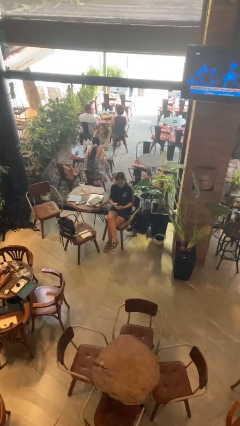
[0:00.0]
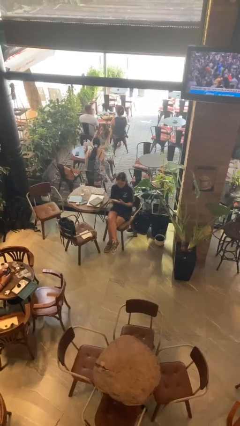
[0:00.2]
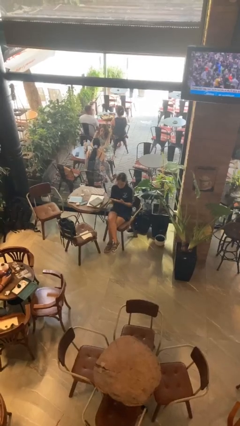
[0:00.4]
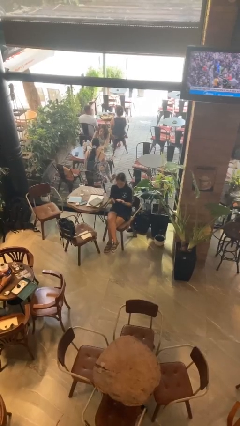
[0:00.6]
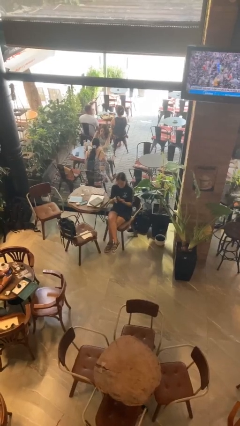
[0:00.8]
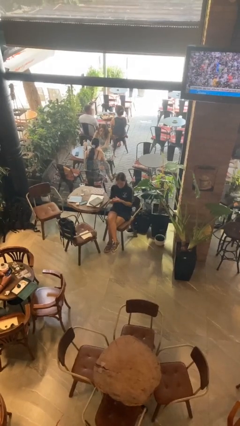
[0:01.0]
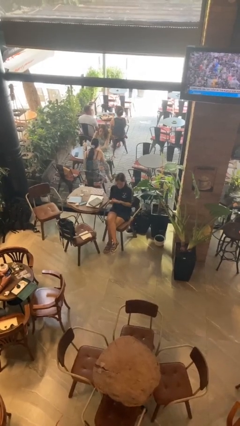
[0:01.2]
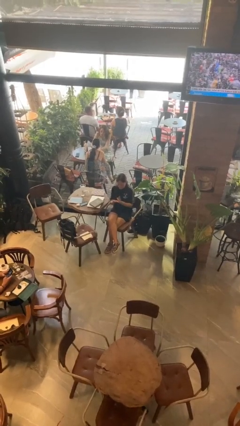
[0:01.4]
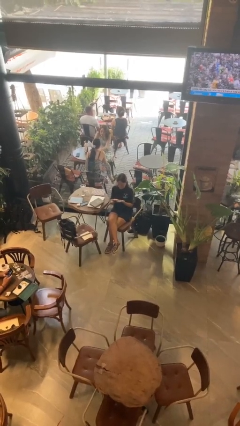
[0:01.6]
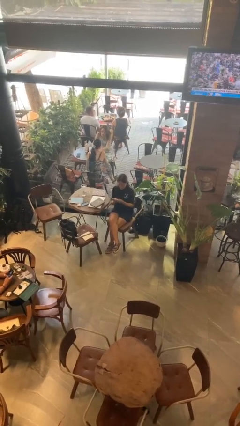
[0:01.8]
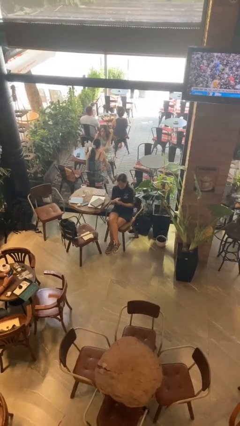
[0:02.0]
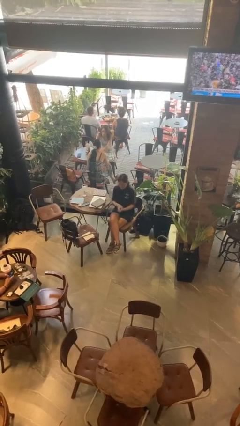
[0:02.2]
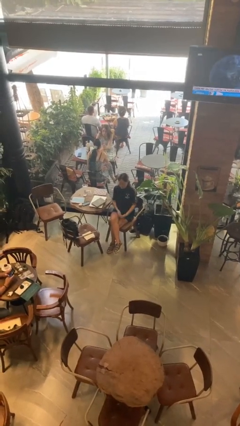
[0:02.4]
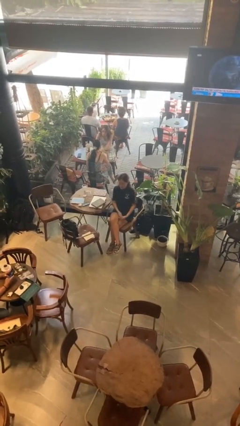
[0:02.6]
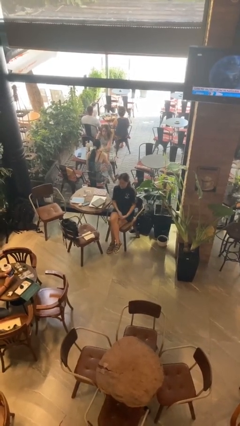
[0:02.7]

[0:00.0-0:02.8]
person looks at hands in lap

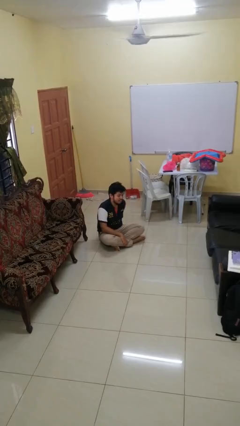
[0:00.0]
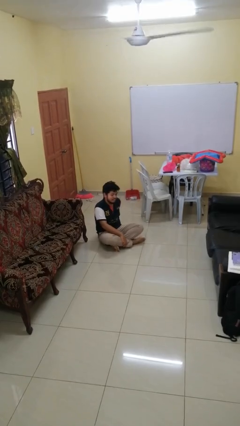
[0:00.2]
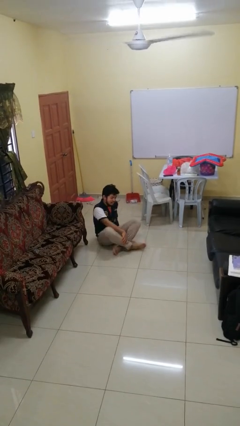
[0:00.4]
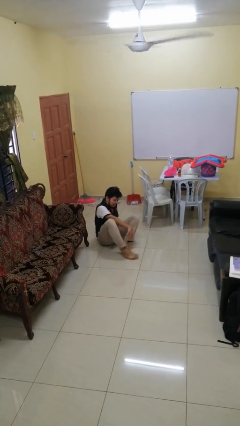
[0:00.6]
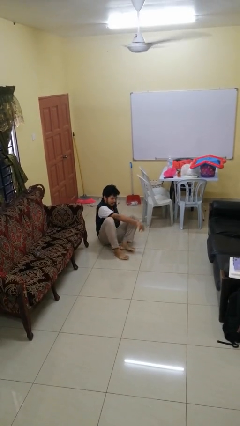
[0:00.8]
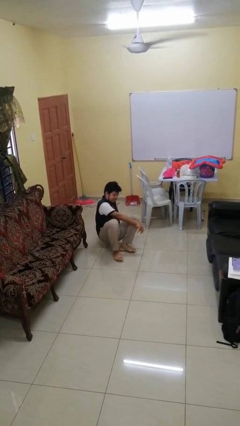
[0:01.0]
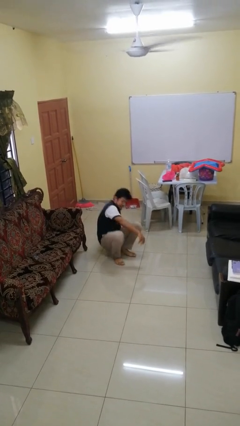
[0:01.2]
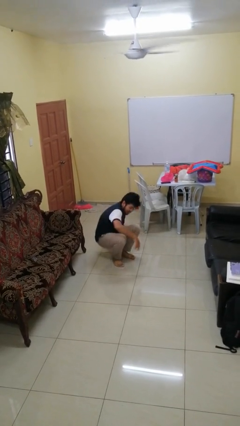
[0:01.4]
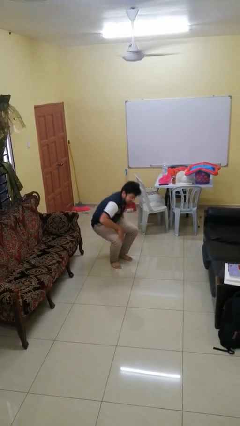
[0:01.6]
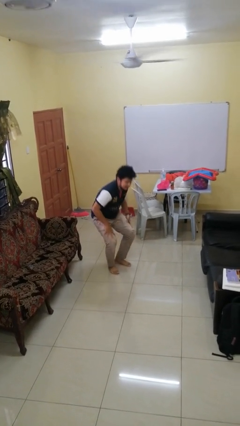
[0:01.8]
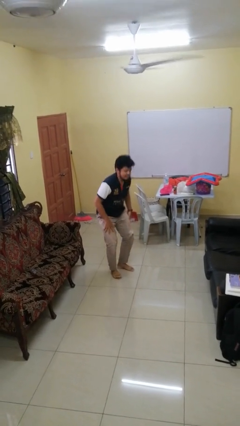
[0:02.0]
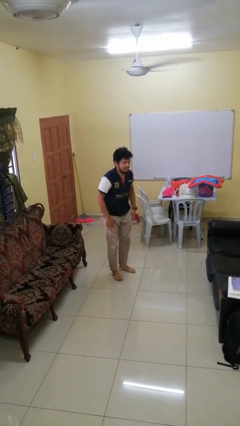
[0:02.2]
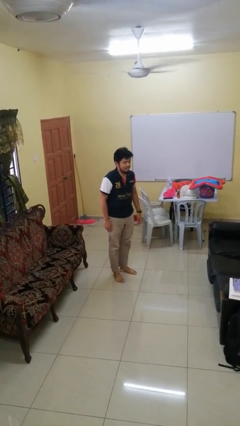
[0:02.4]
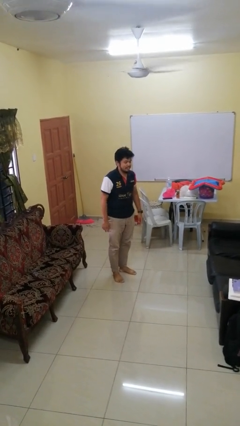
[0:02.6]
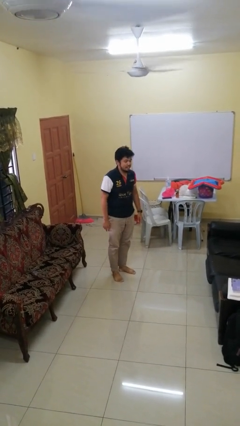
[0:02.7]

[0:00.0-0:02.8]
person stands up from floor

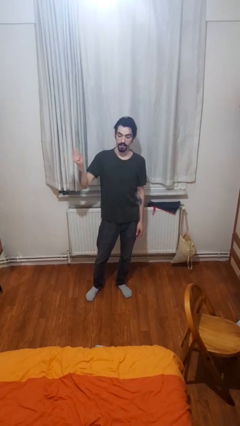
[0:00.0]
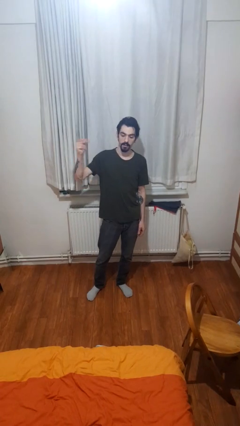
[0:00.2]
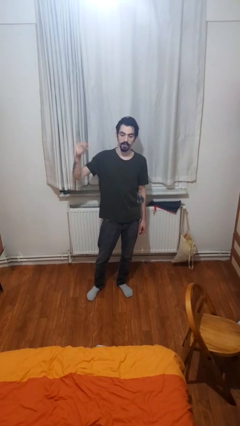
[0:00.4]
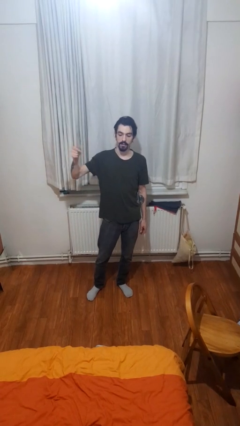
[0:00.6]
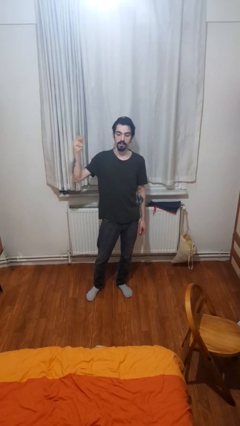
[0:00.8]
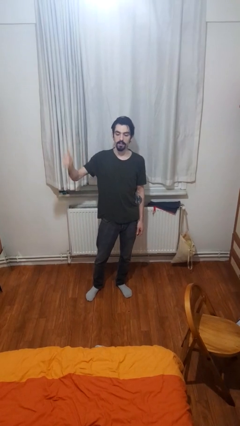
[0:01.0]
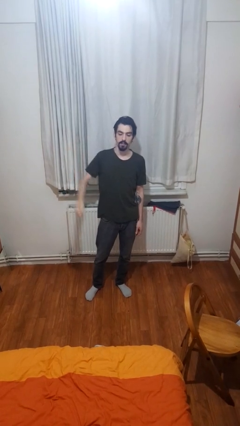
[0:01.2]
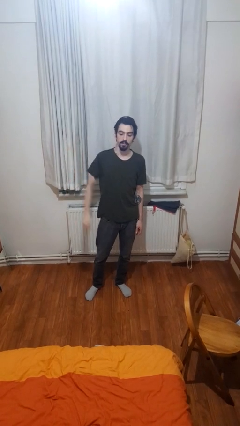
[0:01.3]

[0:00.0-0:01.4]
person snaps fingers

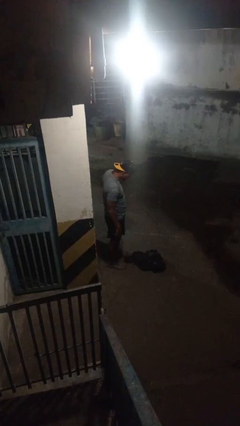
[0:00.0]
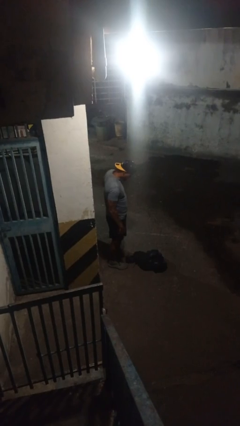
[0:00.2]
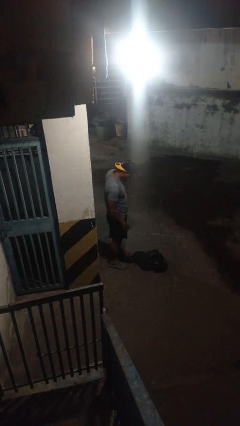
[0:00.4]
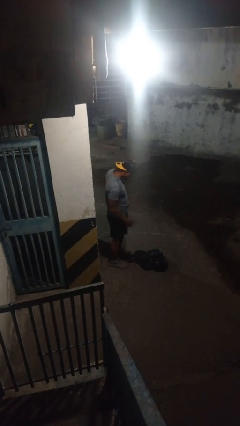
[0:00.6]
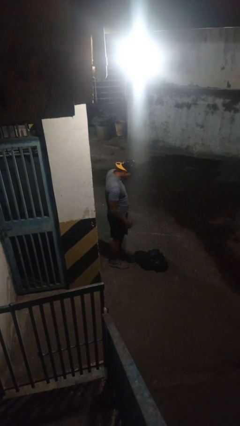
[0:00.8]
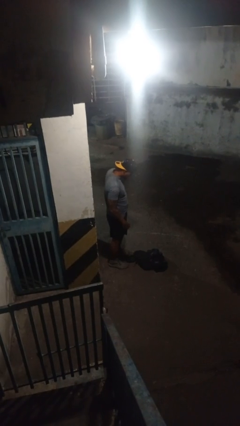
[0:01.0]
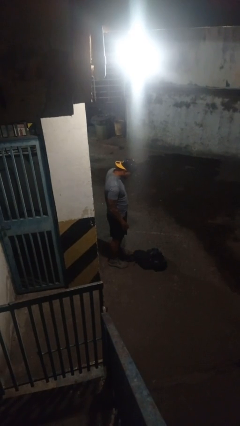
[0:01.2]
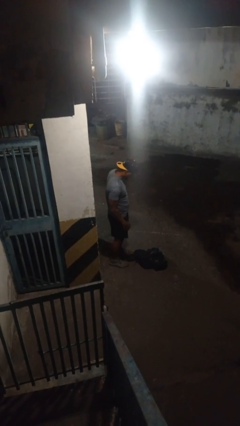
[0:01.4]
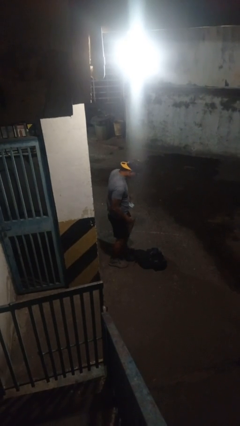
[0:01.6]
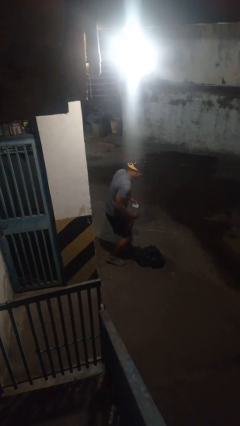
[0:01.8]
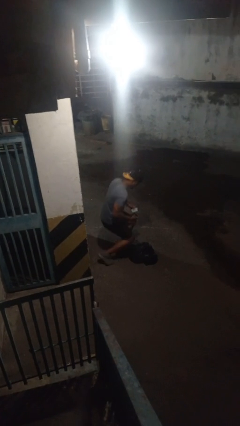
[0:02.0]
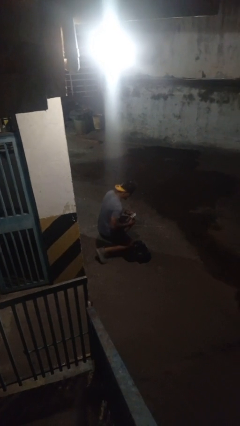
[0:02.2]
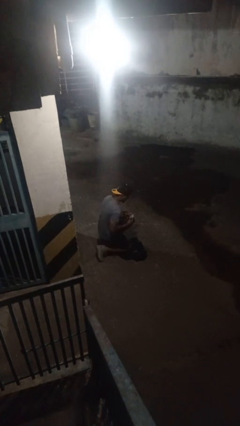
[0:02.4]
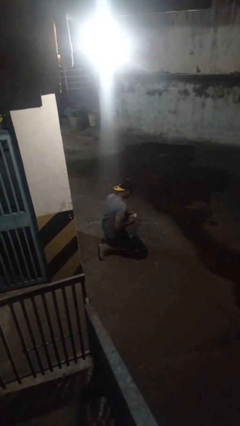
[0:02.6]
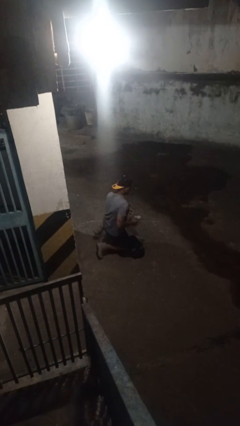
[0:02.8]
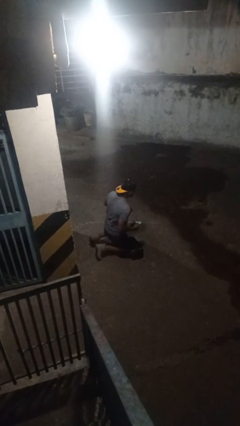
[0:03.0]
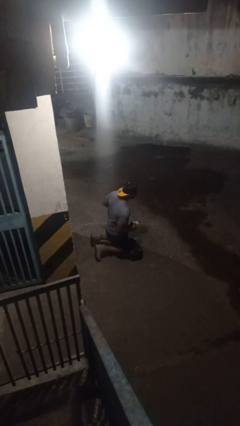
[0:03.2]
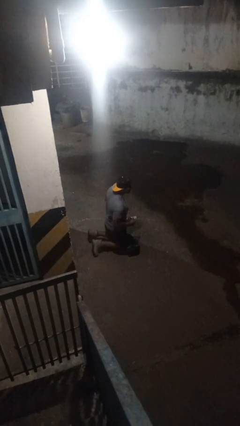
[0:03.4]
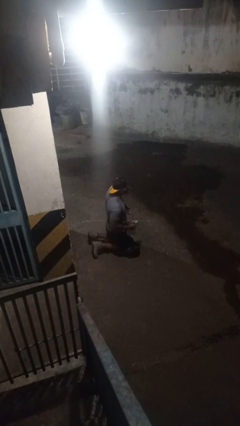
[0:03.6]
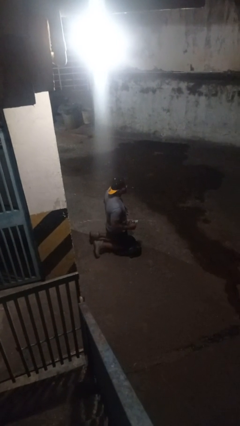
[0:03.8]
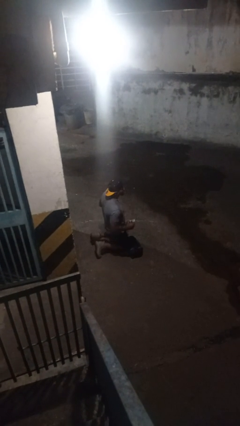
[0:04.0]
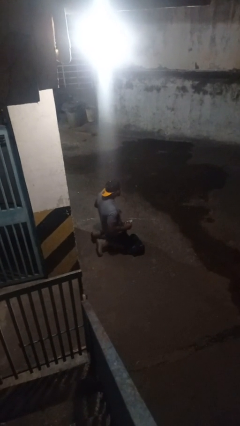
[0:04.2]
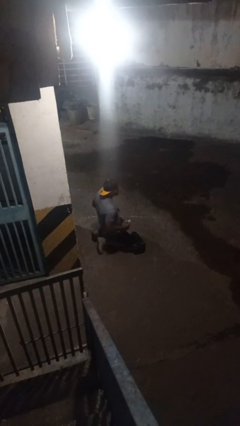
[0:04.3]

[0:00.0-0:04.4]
person kneels

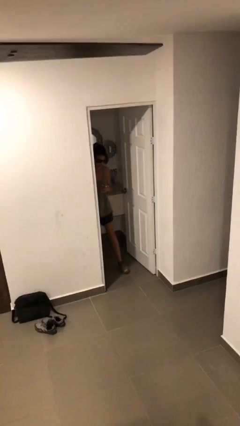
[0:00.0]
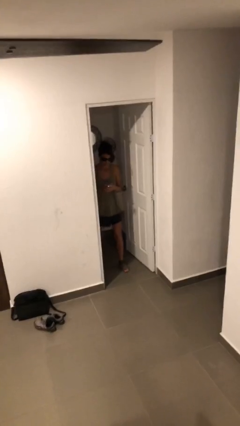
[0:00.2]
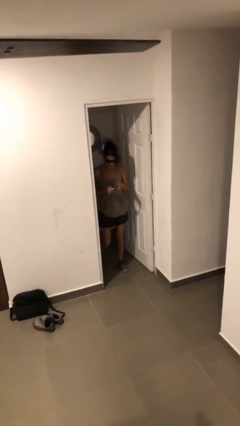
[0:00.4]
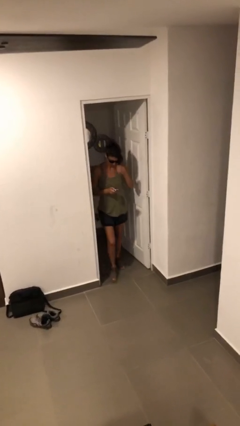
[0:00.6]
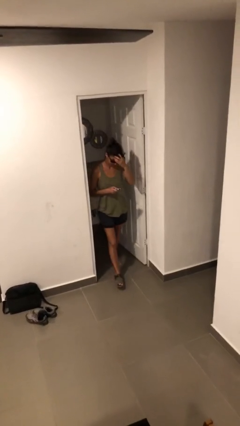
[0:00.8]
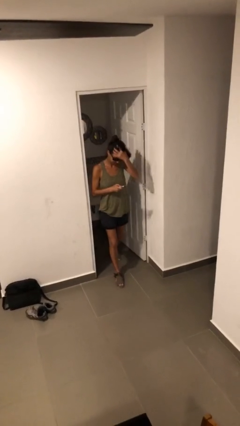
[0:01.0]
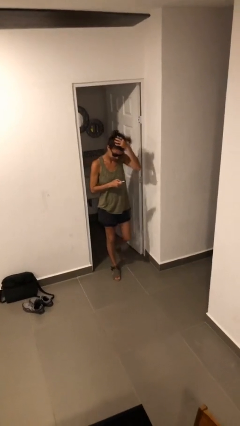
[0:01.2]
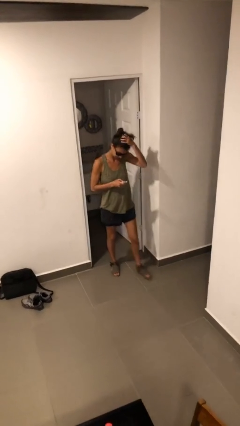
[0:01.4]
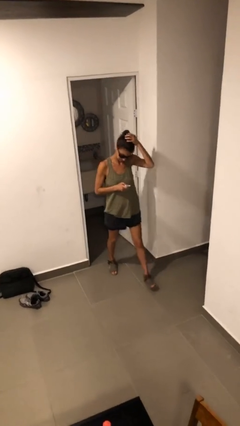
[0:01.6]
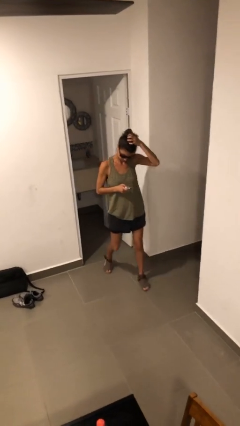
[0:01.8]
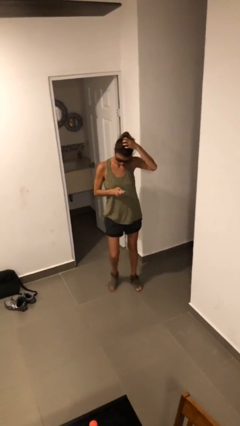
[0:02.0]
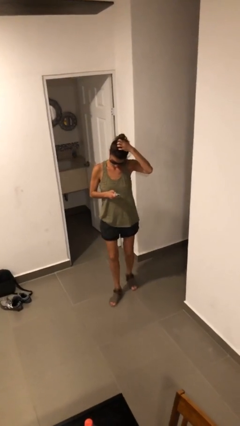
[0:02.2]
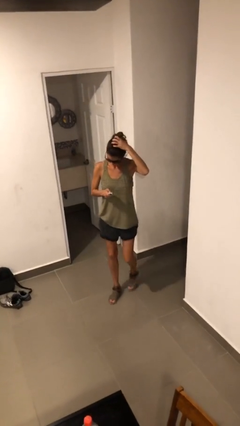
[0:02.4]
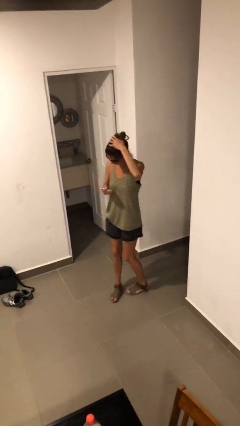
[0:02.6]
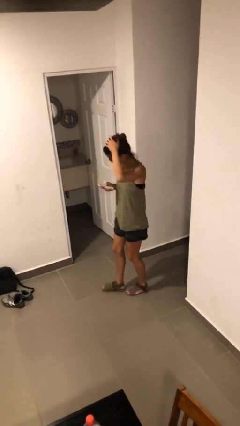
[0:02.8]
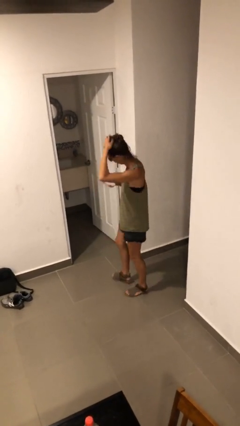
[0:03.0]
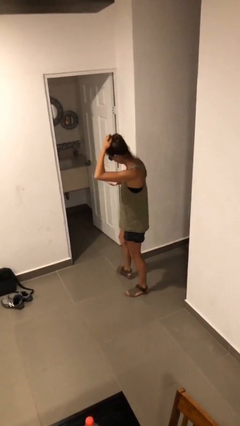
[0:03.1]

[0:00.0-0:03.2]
person enters scene through structure

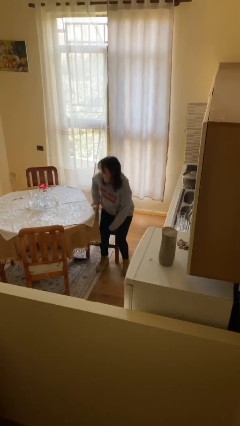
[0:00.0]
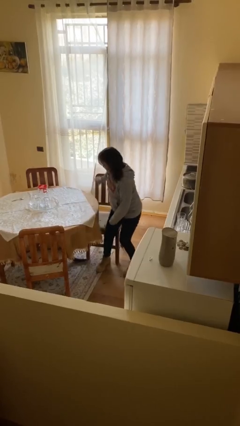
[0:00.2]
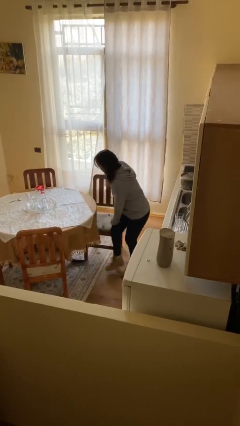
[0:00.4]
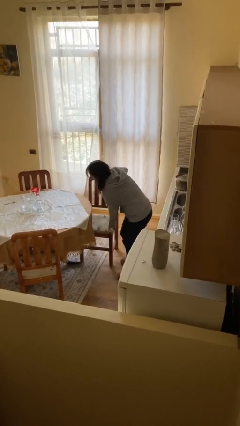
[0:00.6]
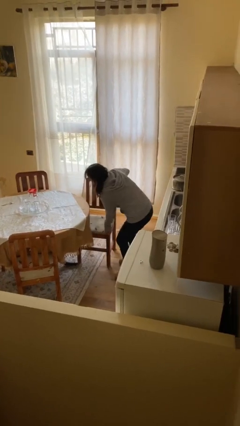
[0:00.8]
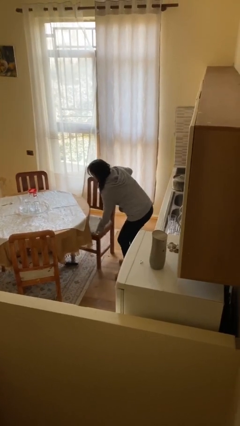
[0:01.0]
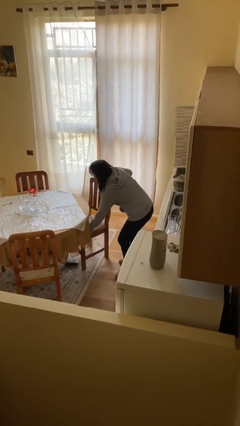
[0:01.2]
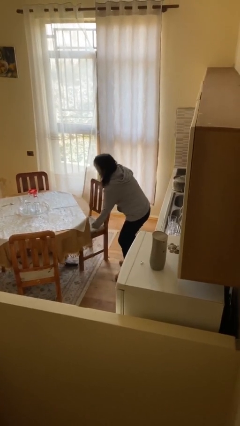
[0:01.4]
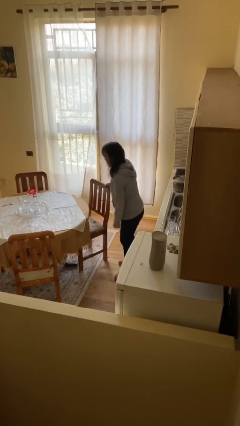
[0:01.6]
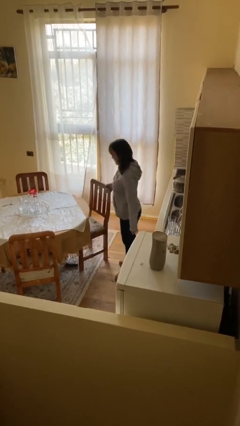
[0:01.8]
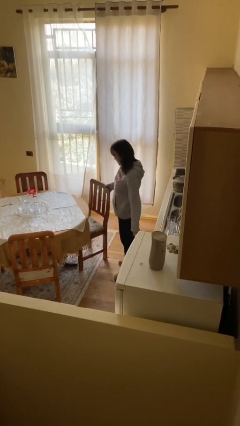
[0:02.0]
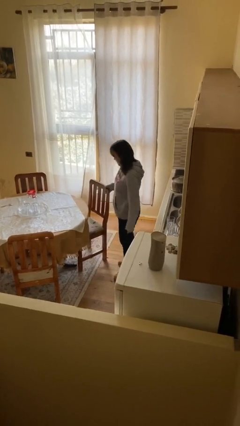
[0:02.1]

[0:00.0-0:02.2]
person stands up

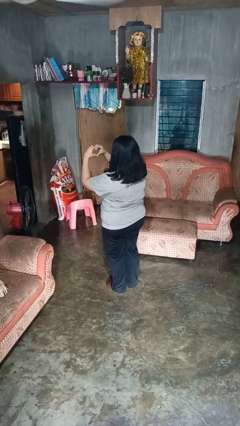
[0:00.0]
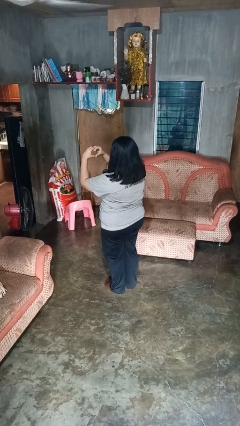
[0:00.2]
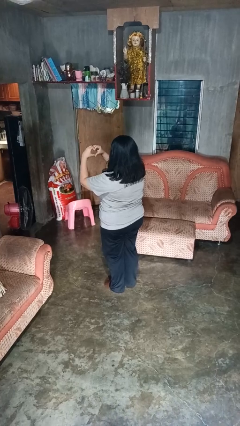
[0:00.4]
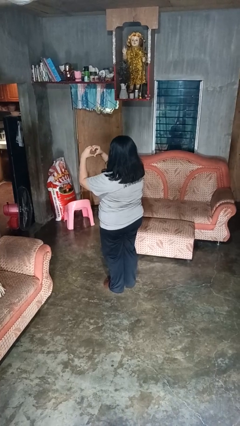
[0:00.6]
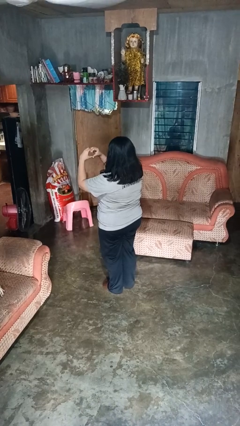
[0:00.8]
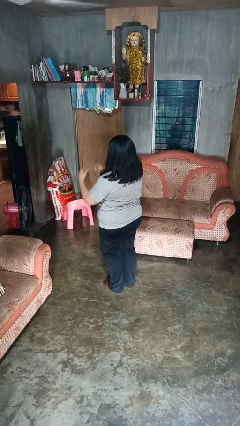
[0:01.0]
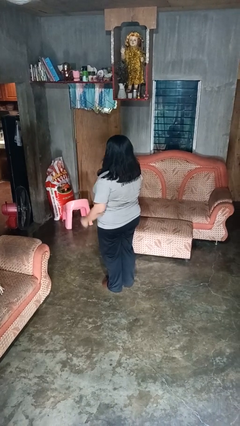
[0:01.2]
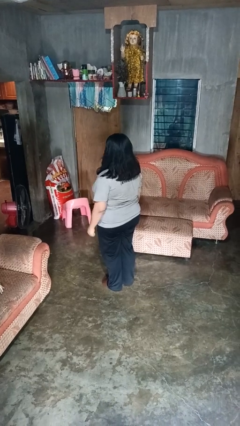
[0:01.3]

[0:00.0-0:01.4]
person gestures heart
